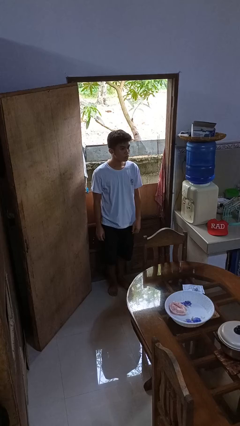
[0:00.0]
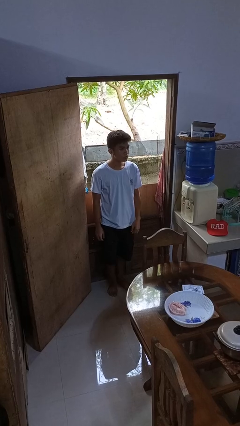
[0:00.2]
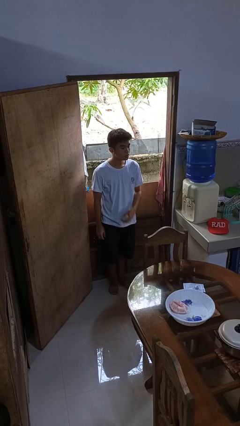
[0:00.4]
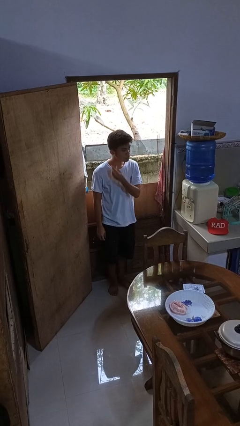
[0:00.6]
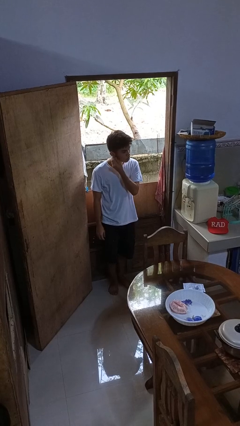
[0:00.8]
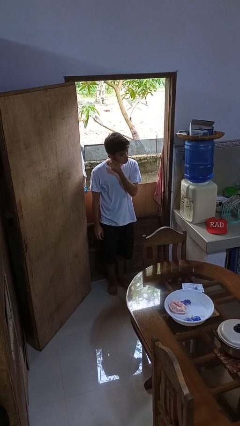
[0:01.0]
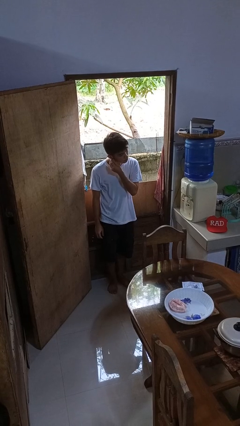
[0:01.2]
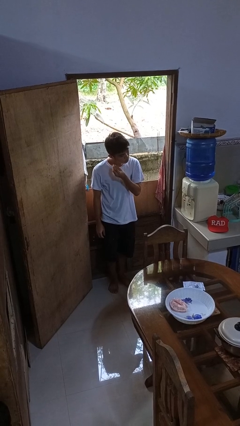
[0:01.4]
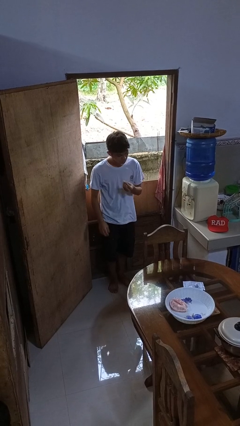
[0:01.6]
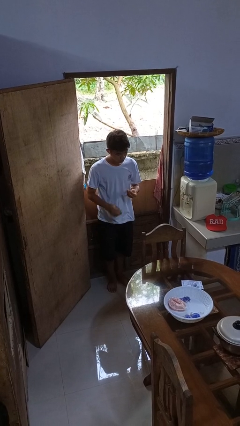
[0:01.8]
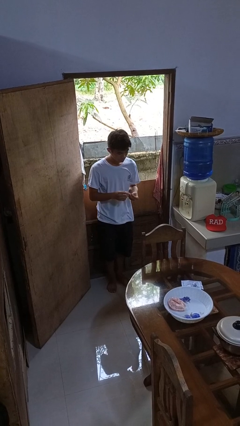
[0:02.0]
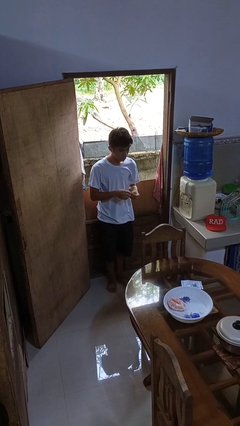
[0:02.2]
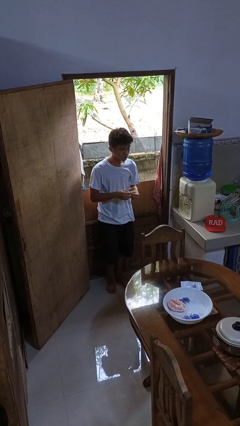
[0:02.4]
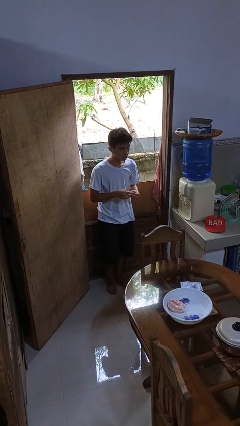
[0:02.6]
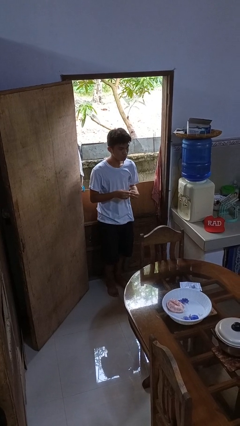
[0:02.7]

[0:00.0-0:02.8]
person takes off earrings

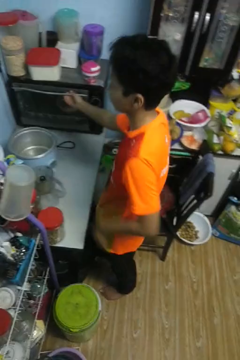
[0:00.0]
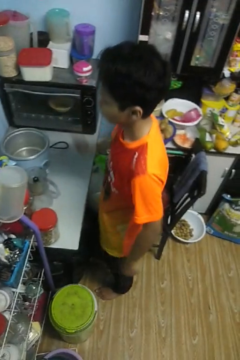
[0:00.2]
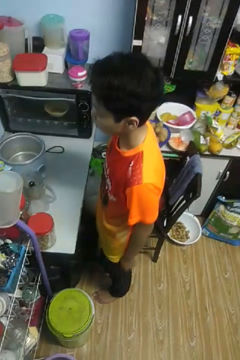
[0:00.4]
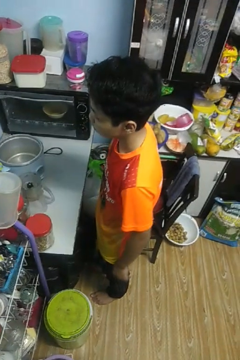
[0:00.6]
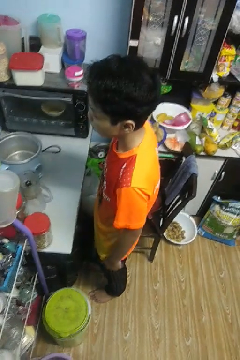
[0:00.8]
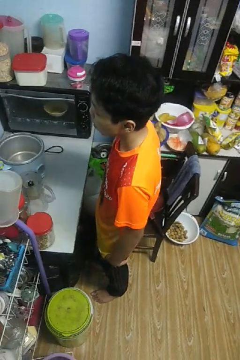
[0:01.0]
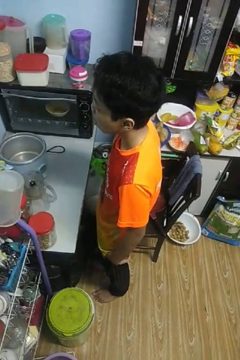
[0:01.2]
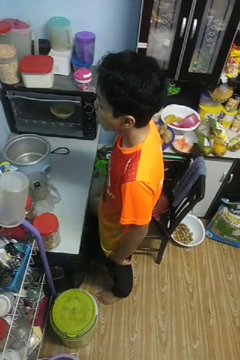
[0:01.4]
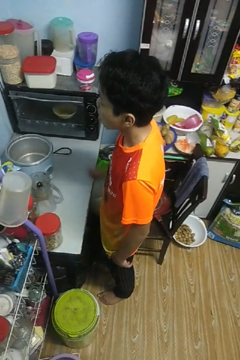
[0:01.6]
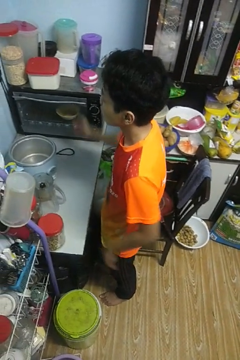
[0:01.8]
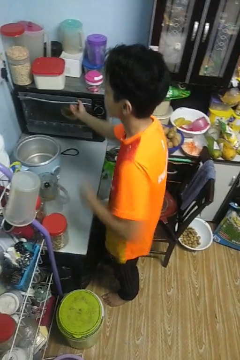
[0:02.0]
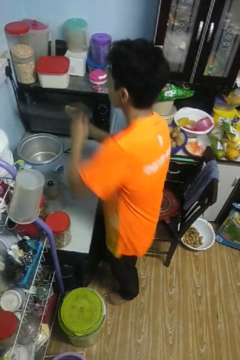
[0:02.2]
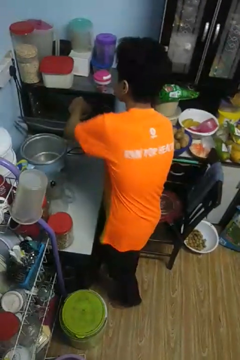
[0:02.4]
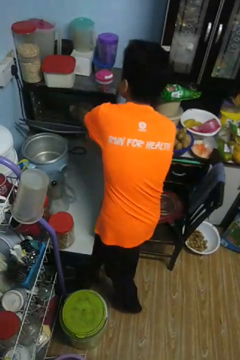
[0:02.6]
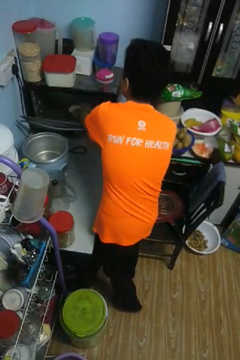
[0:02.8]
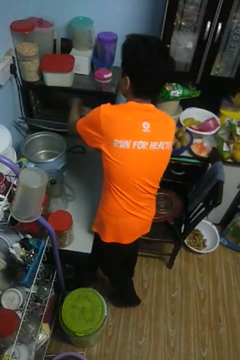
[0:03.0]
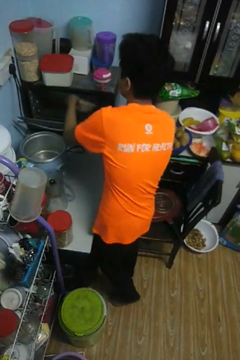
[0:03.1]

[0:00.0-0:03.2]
person takes object from oven

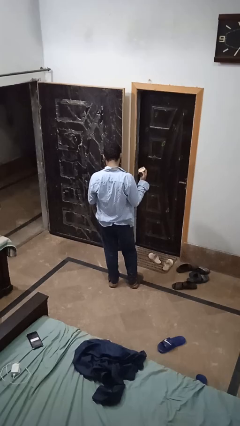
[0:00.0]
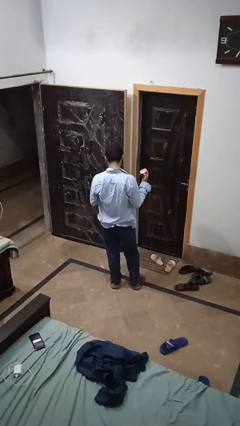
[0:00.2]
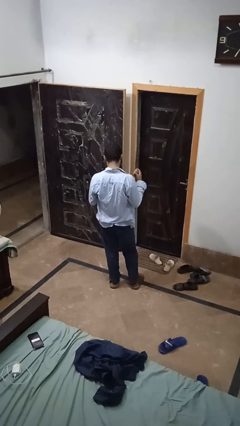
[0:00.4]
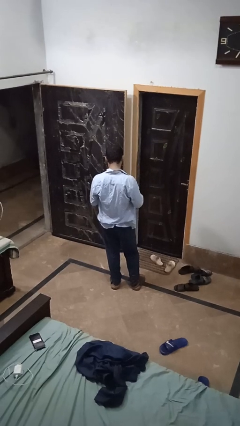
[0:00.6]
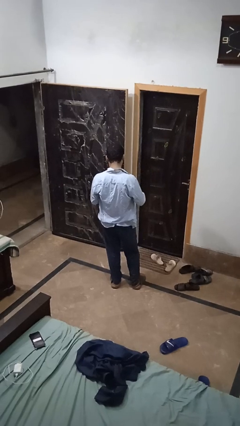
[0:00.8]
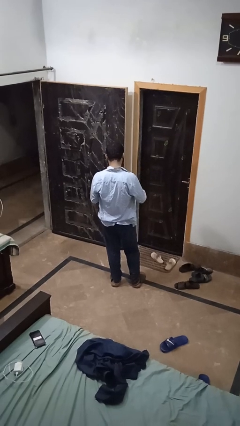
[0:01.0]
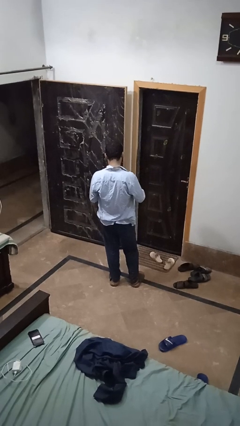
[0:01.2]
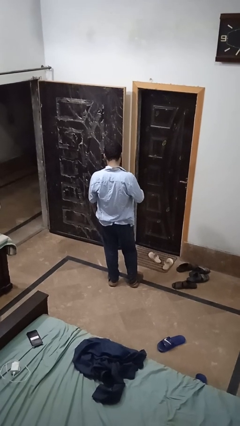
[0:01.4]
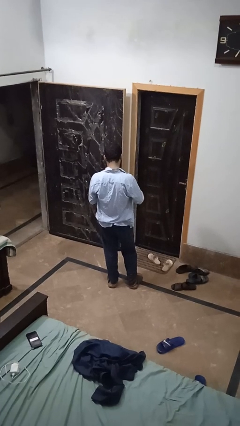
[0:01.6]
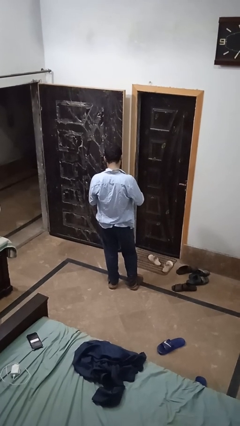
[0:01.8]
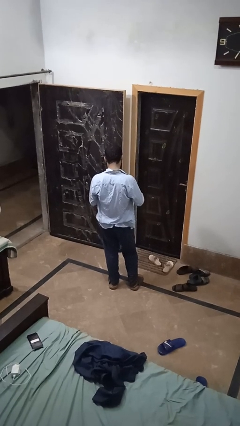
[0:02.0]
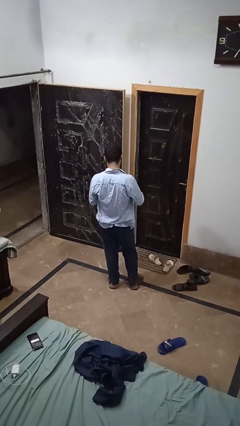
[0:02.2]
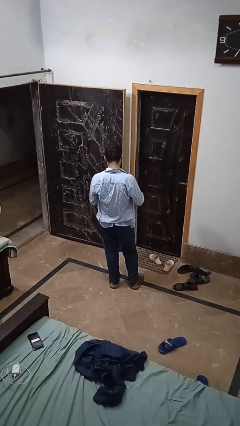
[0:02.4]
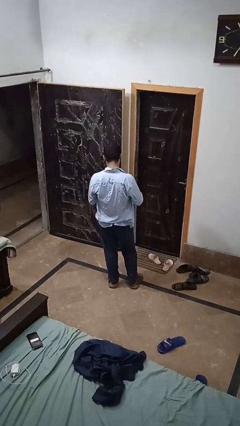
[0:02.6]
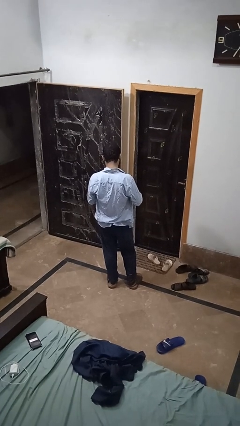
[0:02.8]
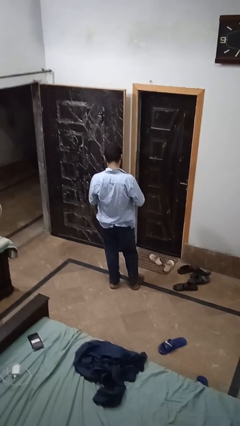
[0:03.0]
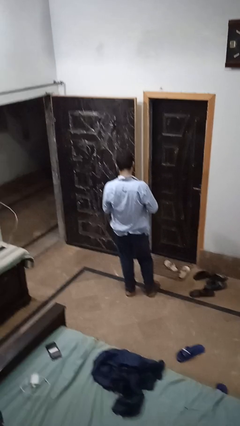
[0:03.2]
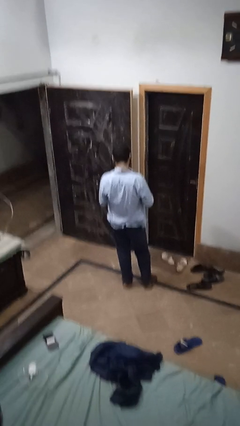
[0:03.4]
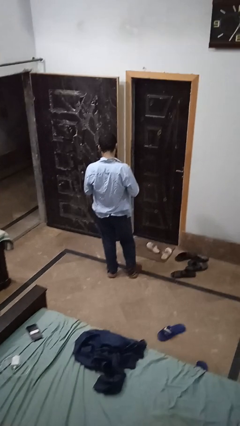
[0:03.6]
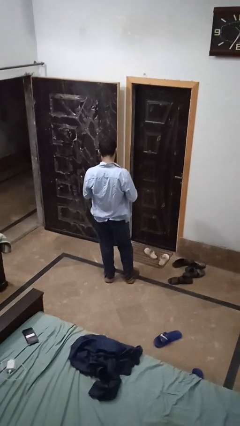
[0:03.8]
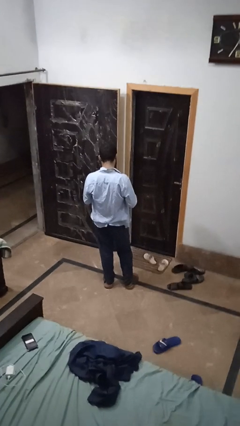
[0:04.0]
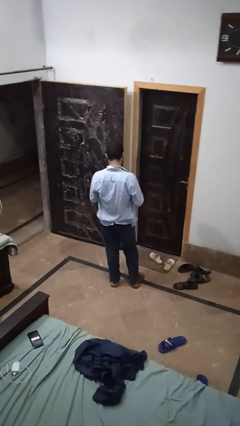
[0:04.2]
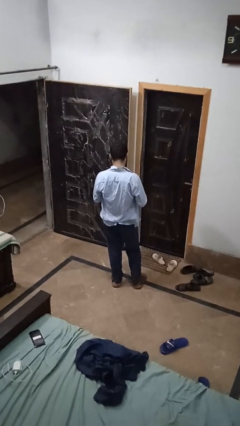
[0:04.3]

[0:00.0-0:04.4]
person closes jar

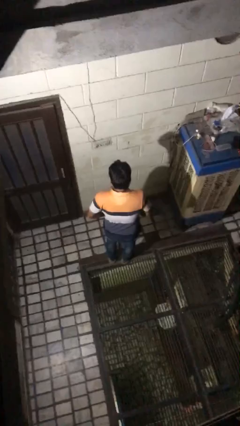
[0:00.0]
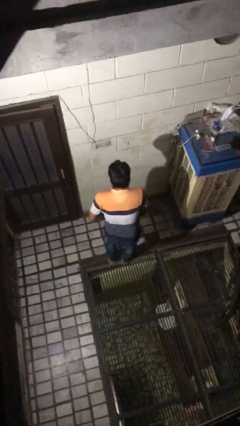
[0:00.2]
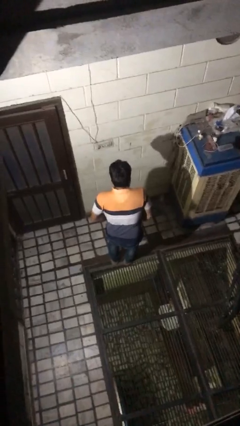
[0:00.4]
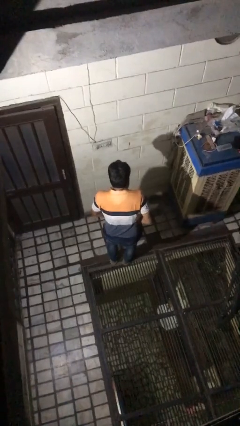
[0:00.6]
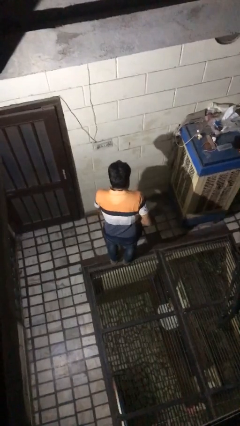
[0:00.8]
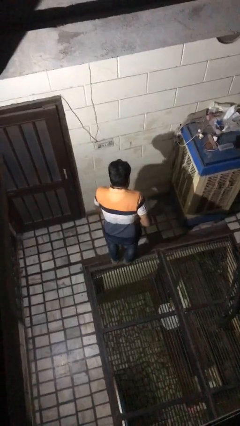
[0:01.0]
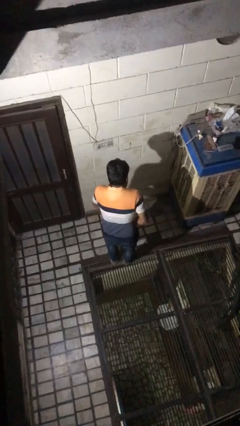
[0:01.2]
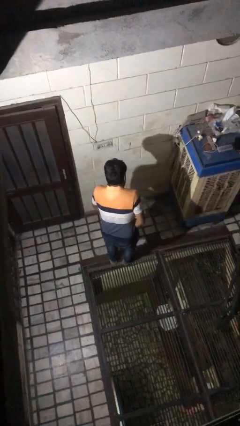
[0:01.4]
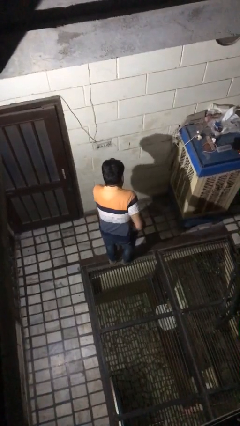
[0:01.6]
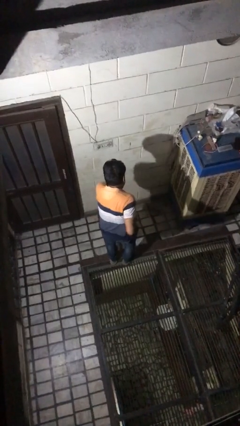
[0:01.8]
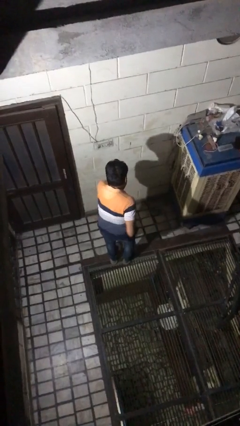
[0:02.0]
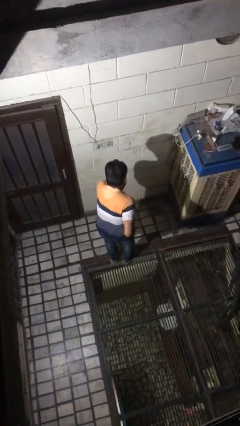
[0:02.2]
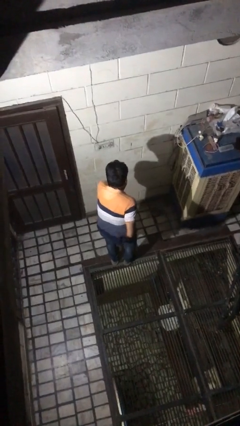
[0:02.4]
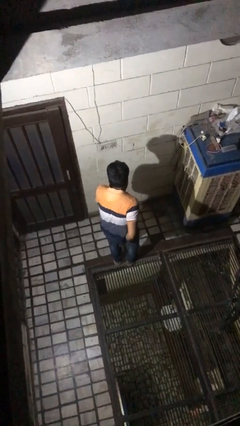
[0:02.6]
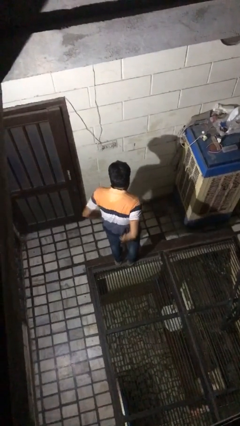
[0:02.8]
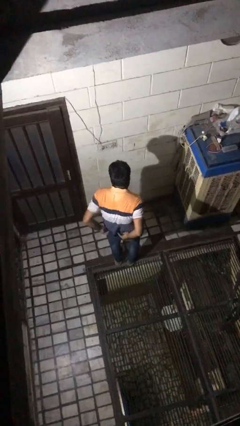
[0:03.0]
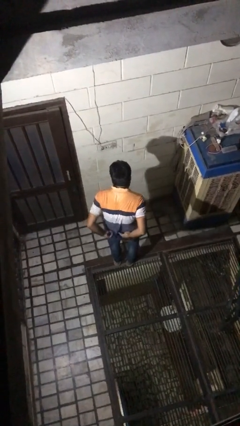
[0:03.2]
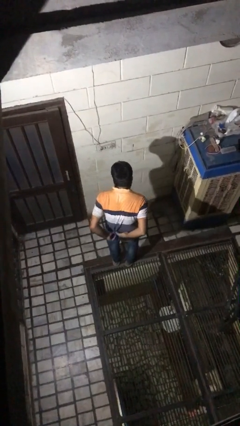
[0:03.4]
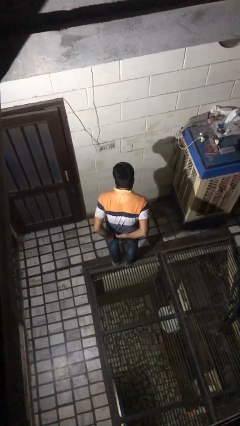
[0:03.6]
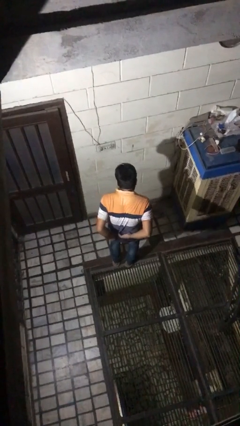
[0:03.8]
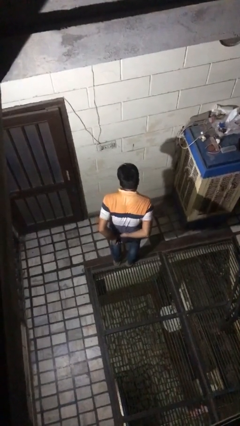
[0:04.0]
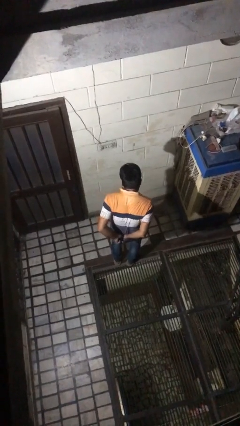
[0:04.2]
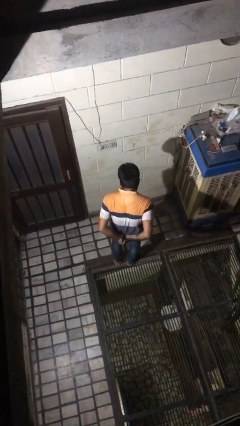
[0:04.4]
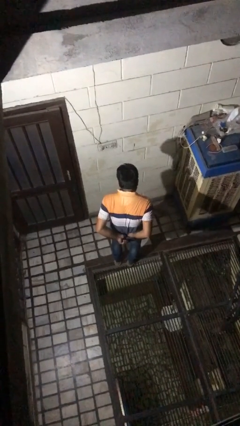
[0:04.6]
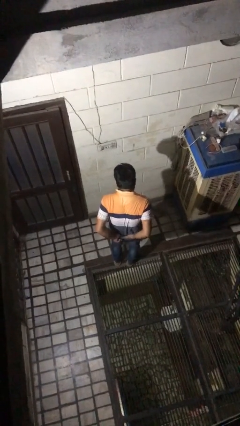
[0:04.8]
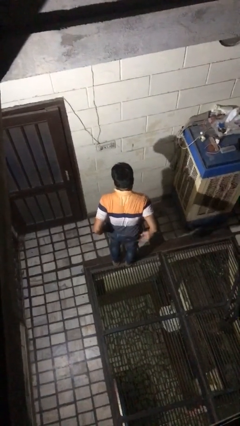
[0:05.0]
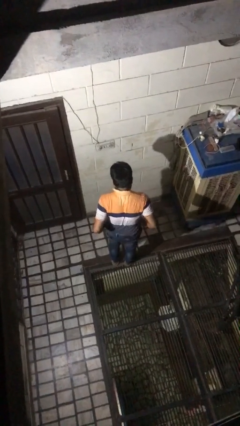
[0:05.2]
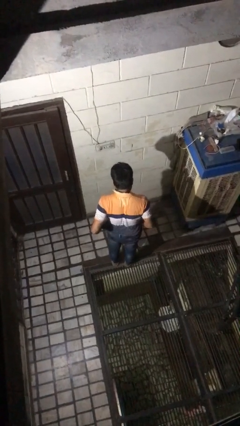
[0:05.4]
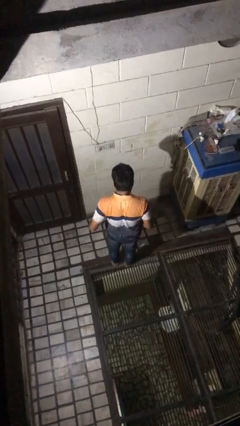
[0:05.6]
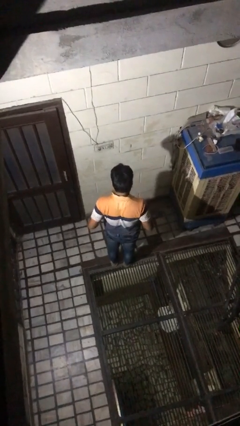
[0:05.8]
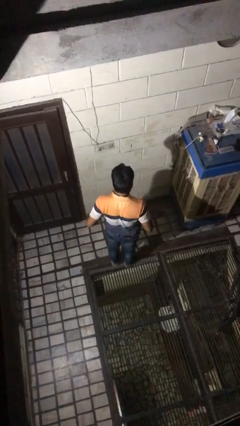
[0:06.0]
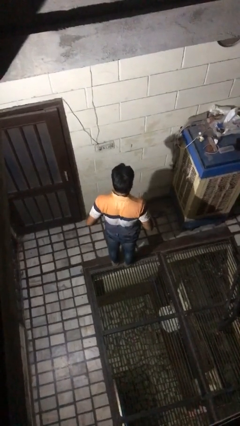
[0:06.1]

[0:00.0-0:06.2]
person tucks in shirt

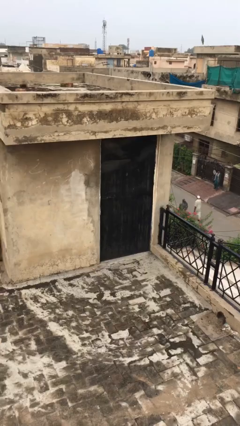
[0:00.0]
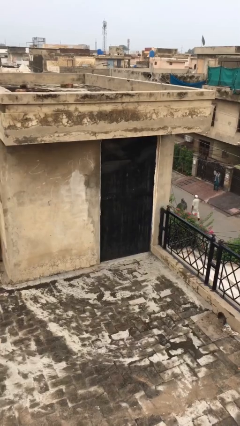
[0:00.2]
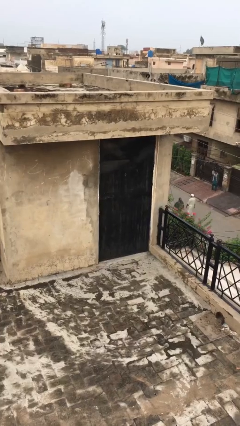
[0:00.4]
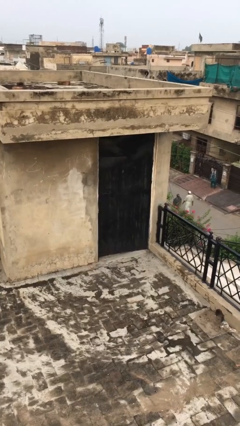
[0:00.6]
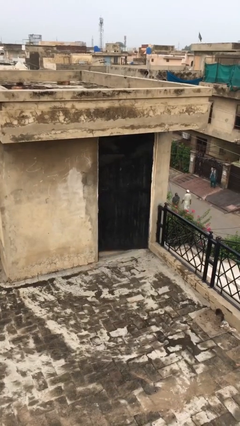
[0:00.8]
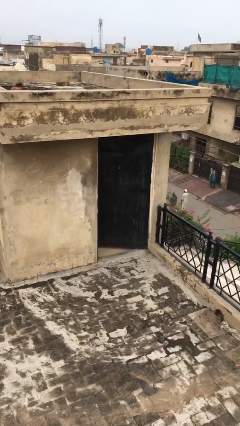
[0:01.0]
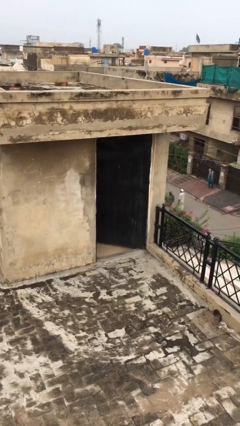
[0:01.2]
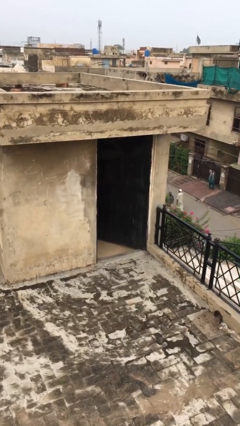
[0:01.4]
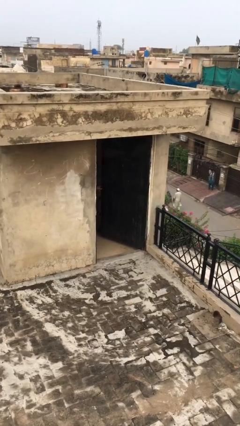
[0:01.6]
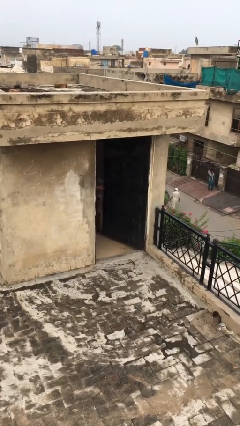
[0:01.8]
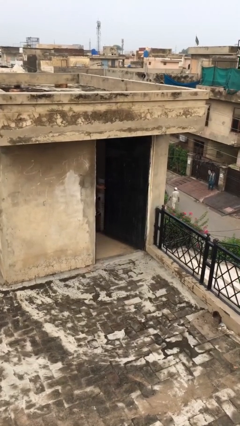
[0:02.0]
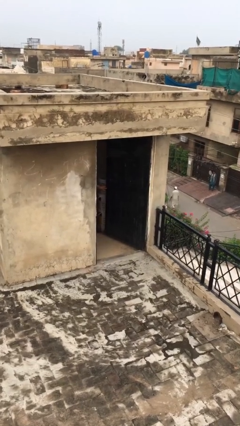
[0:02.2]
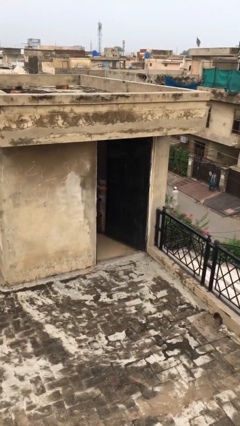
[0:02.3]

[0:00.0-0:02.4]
person opens facility door
